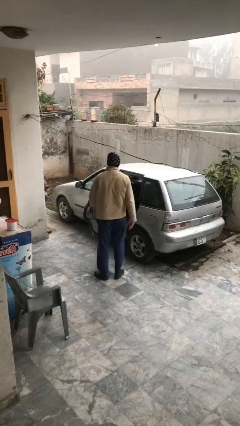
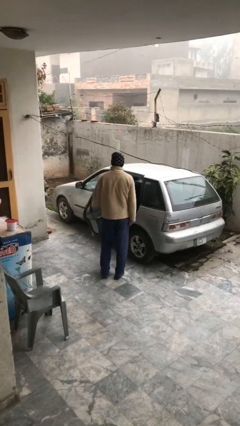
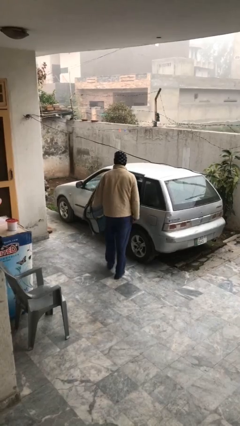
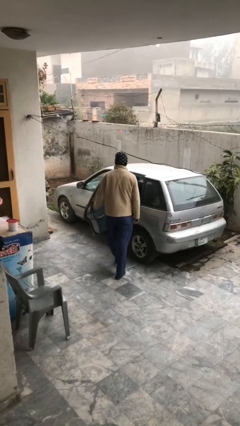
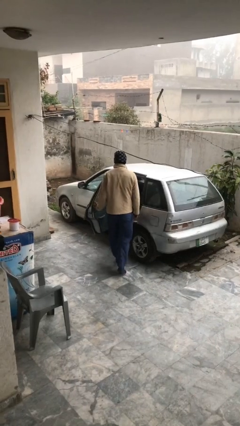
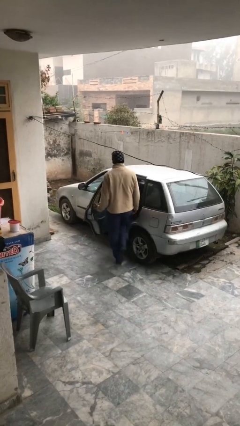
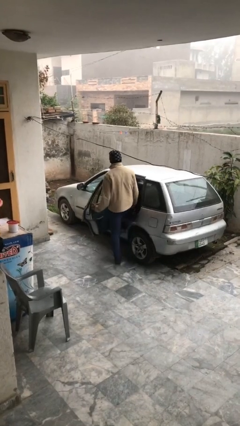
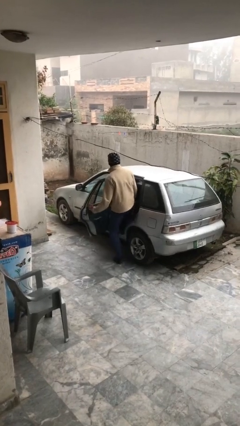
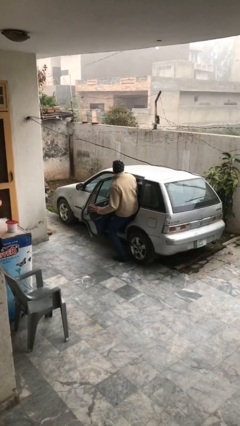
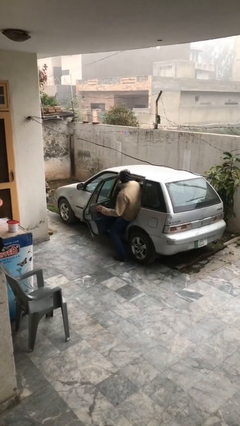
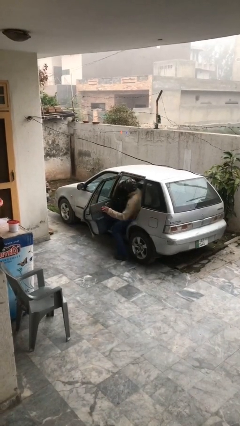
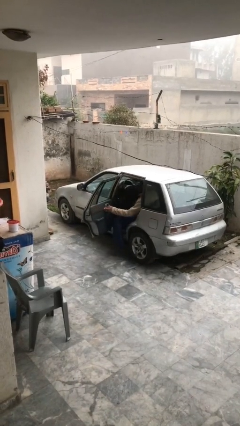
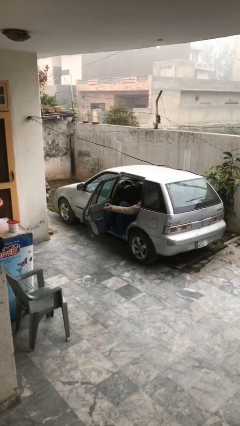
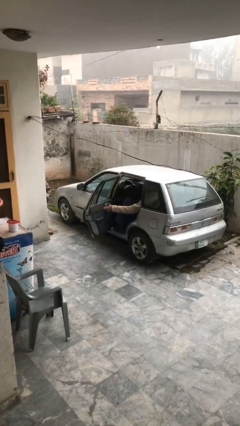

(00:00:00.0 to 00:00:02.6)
person enters car

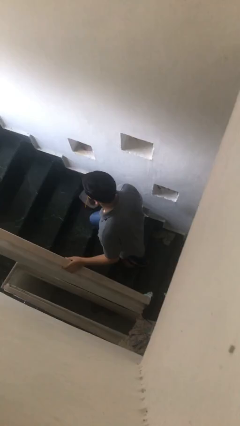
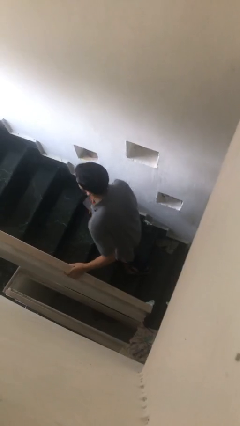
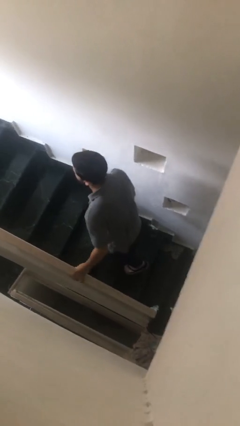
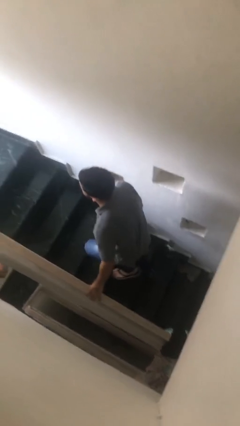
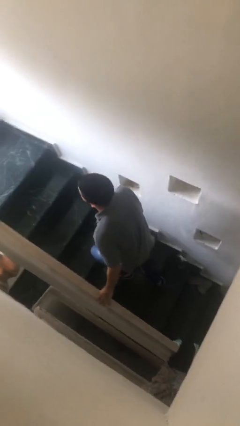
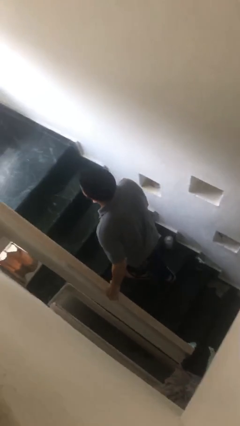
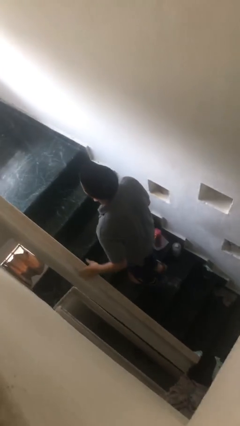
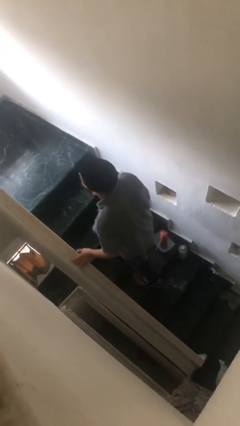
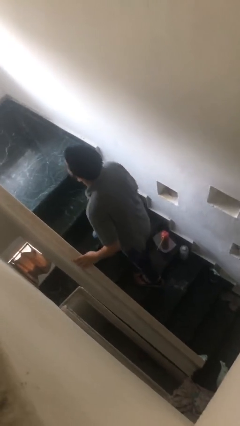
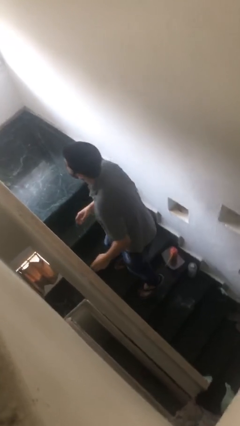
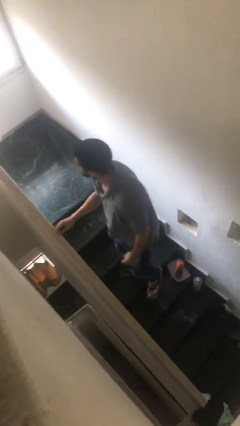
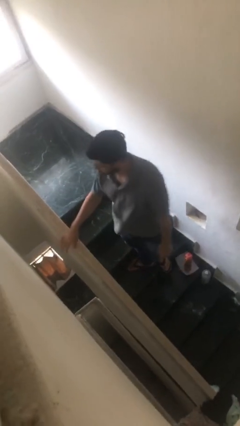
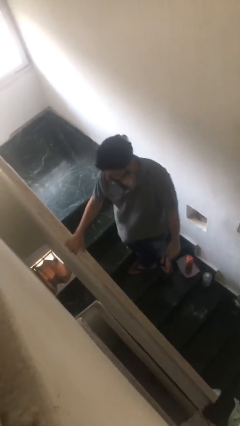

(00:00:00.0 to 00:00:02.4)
person climbs up stairs

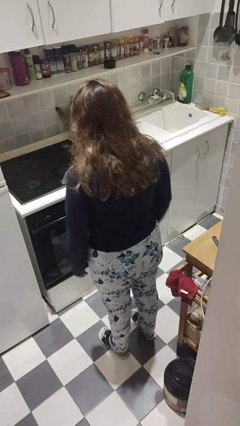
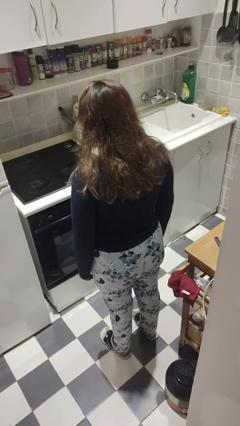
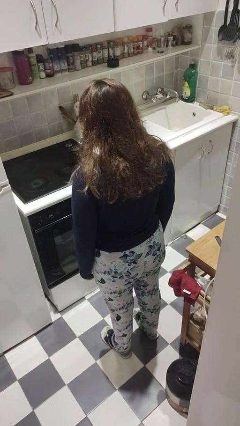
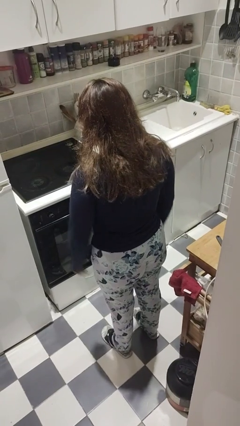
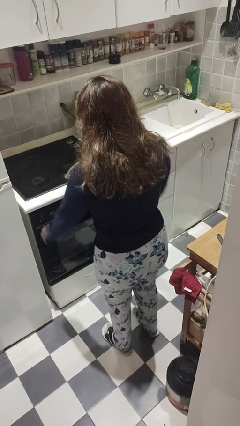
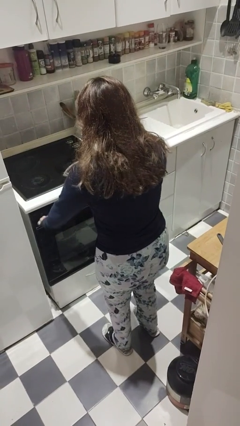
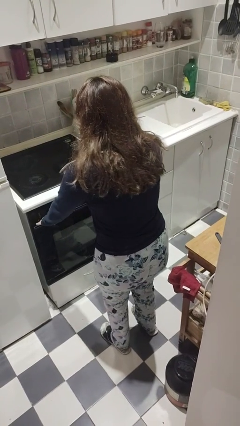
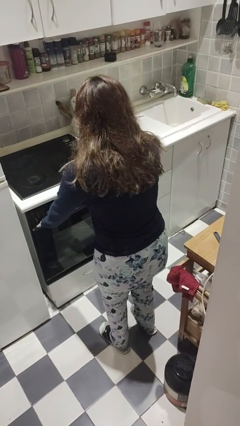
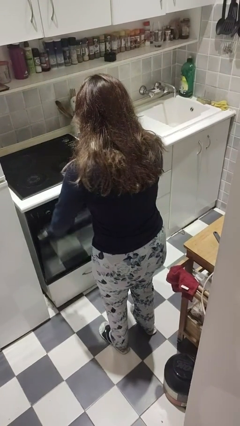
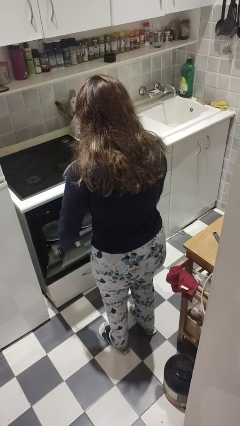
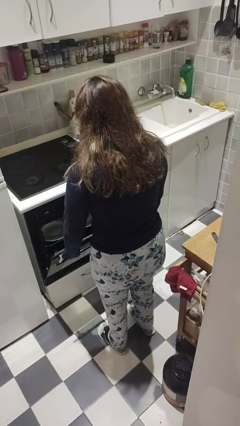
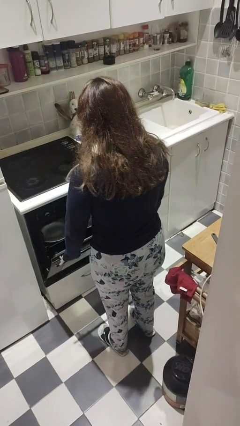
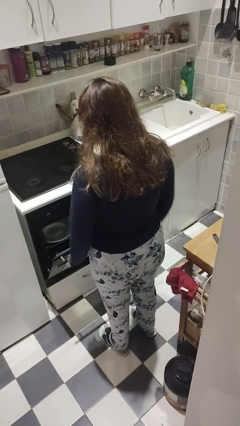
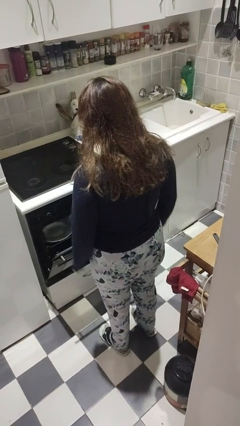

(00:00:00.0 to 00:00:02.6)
person opens dishwasher

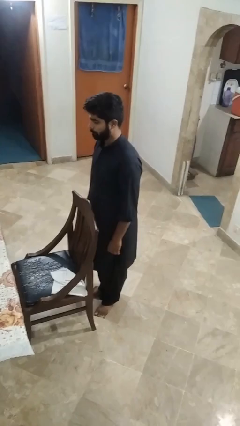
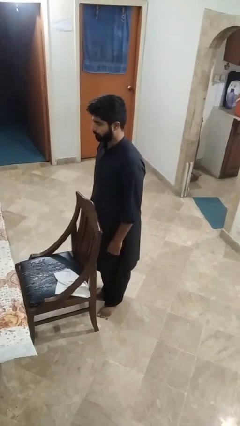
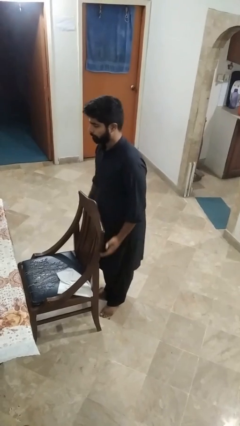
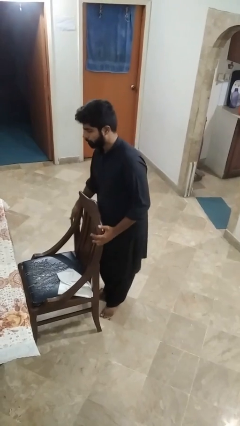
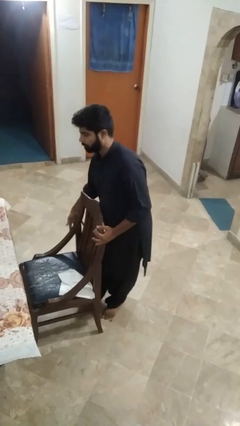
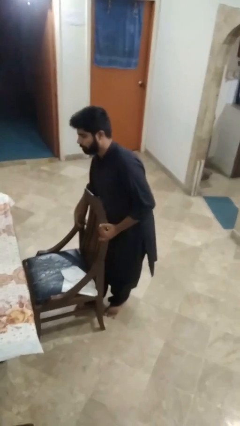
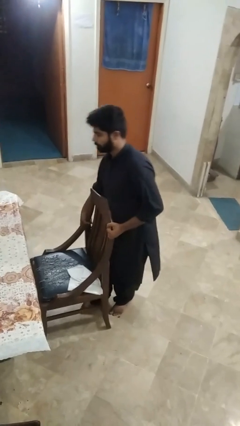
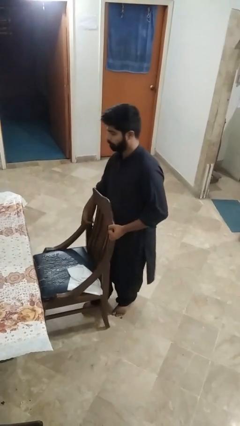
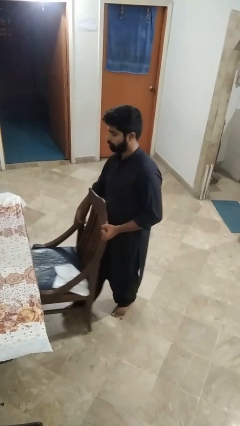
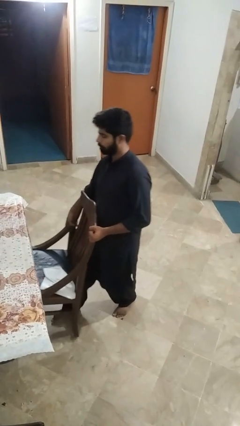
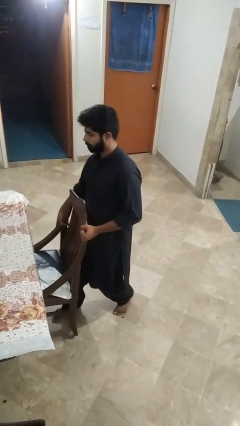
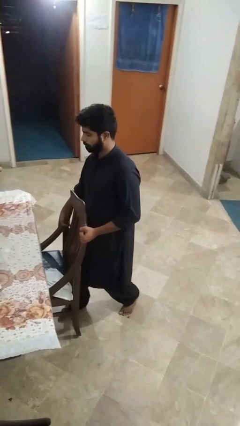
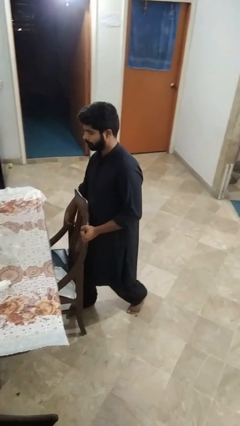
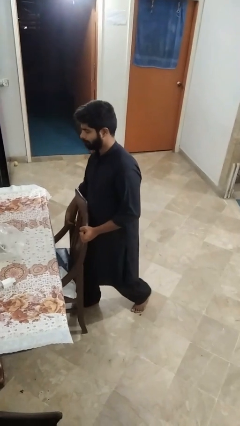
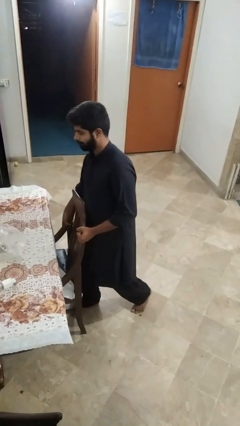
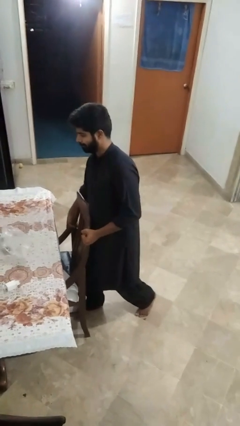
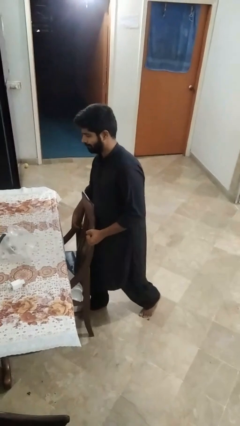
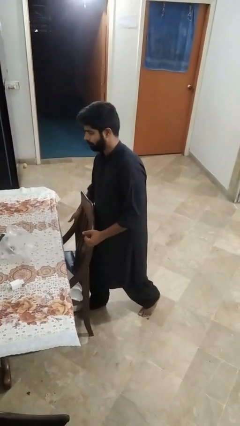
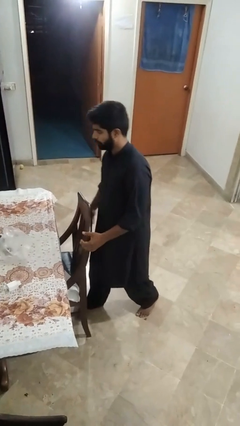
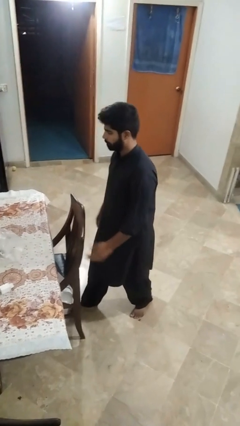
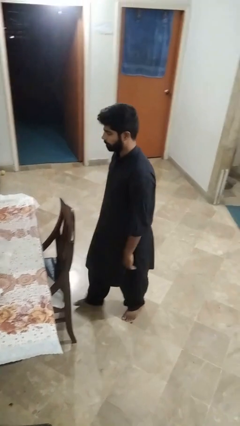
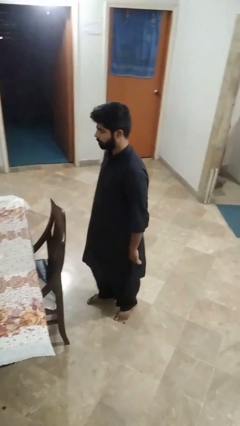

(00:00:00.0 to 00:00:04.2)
person pushes in chair

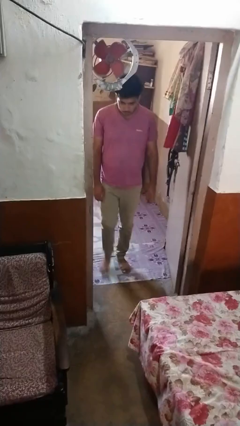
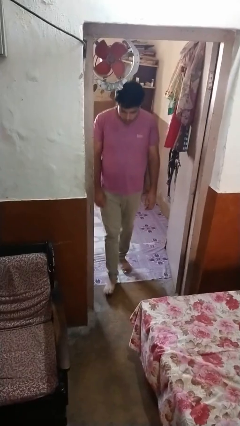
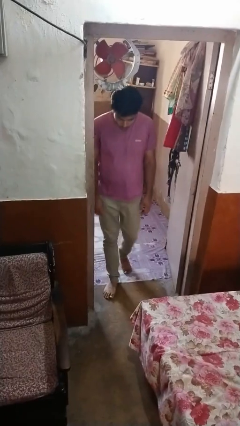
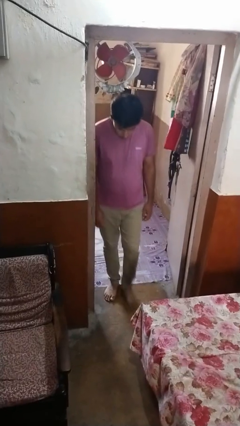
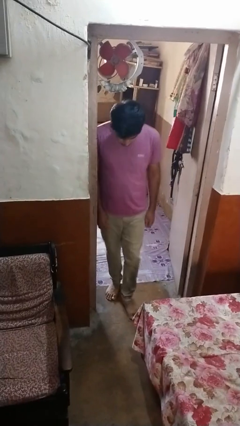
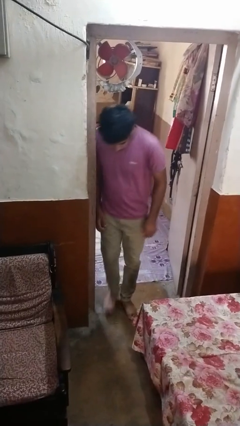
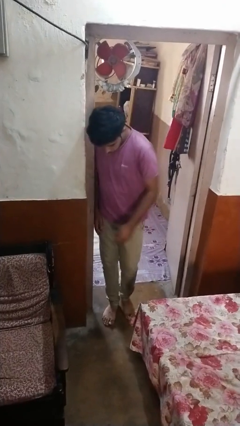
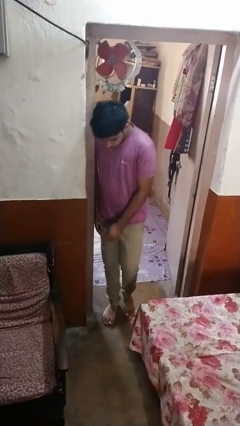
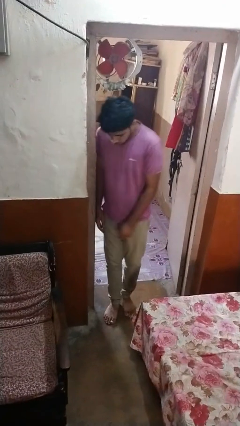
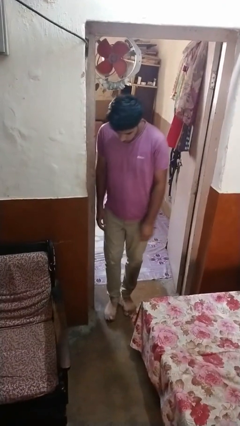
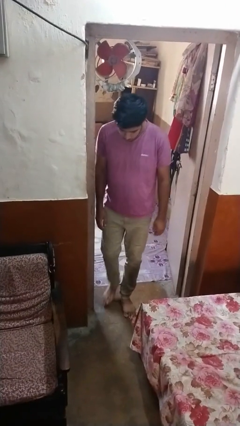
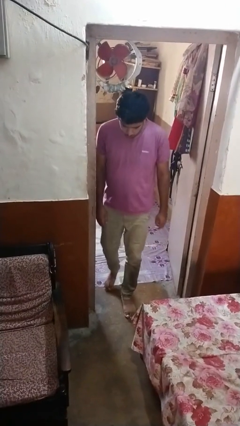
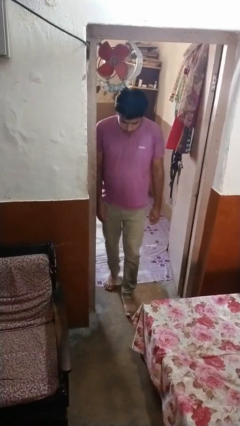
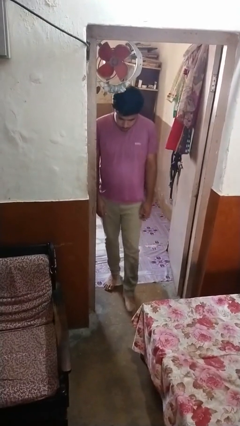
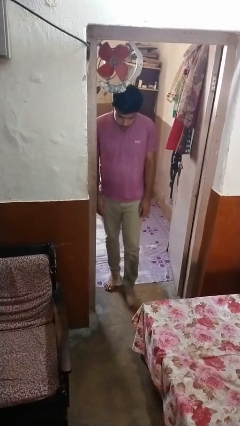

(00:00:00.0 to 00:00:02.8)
person bumps into wall

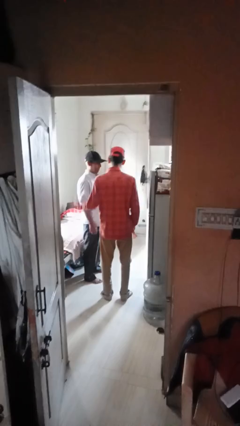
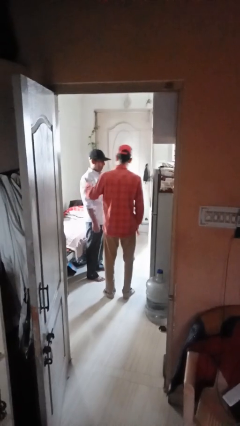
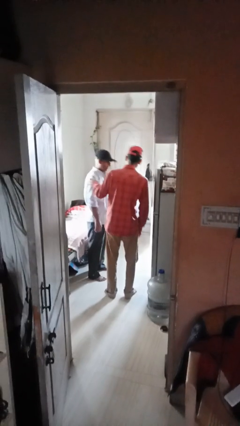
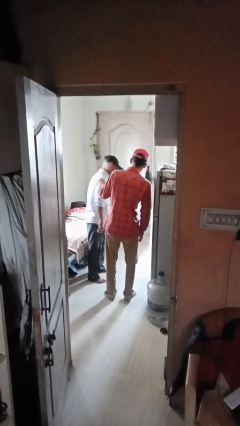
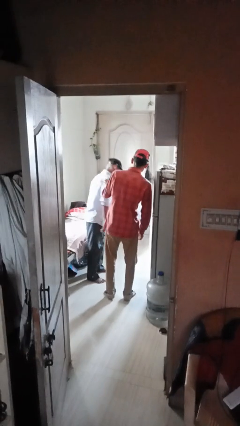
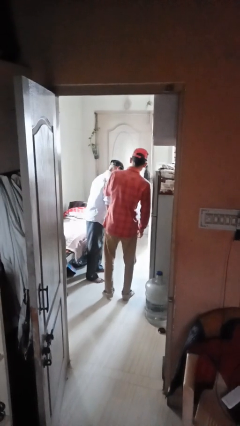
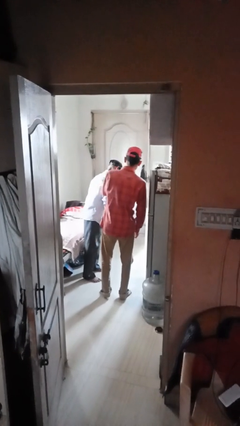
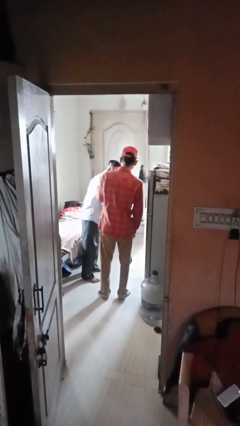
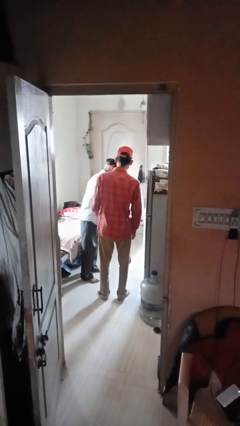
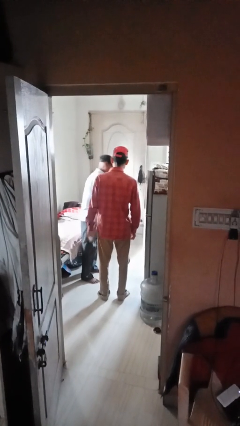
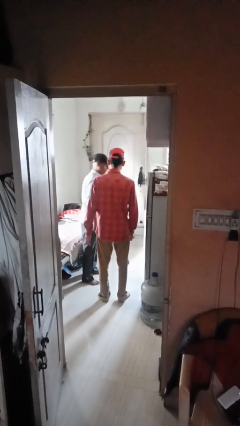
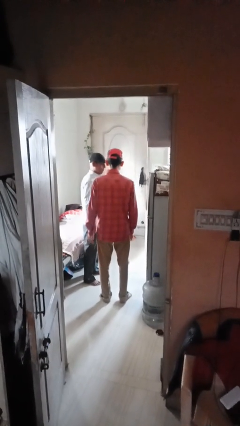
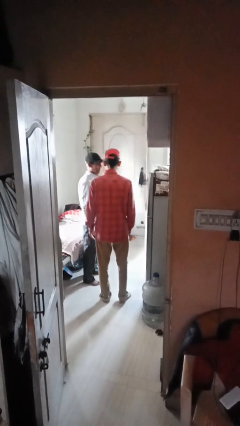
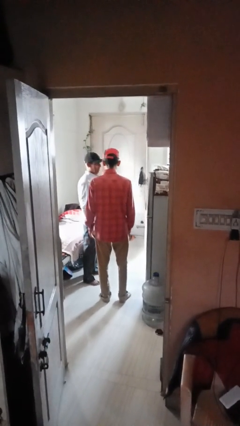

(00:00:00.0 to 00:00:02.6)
person shoves person

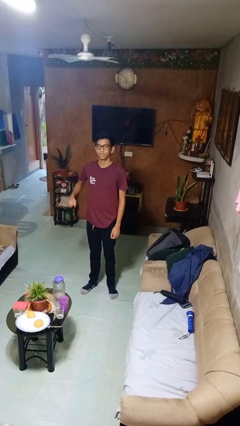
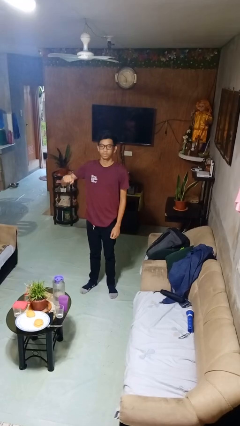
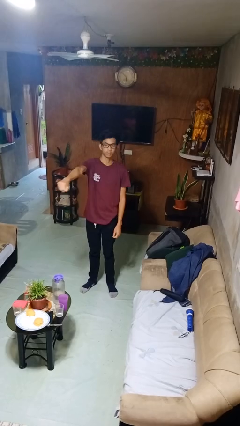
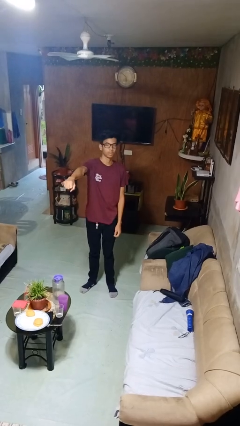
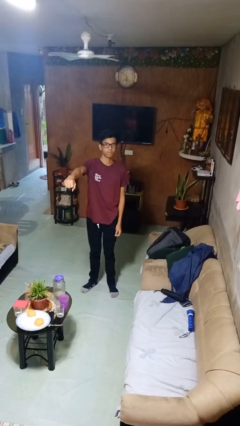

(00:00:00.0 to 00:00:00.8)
person punches
